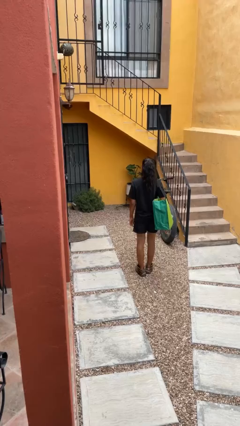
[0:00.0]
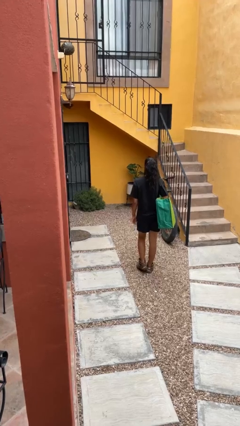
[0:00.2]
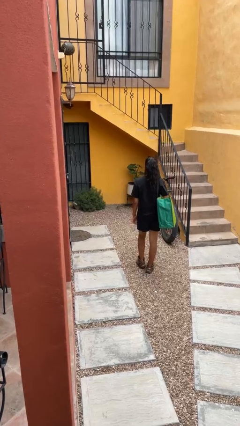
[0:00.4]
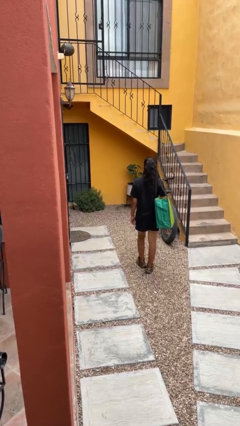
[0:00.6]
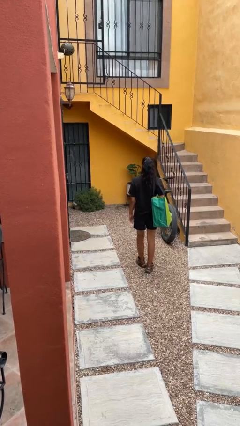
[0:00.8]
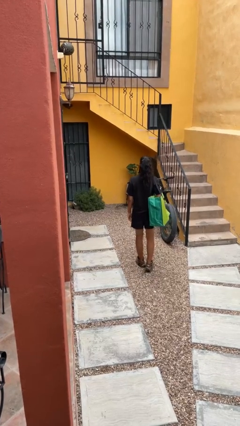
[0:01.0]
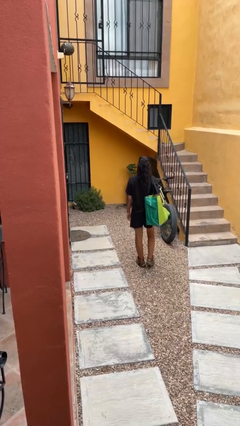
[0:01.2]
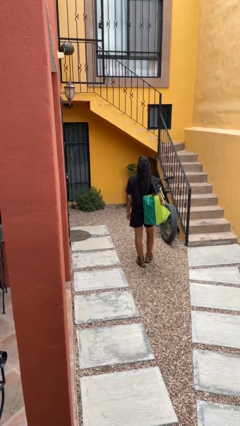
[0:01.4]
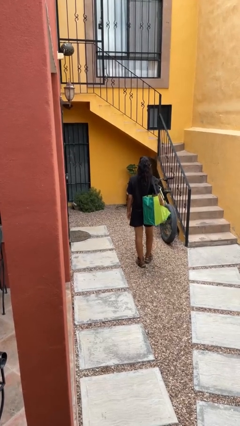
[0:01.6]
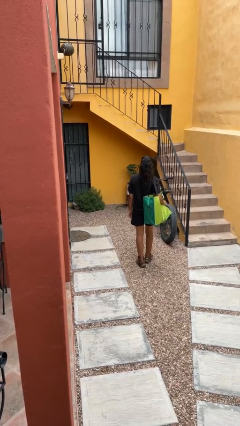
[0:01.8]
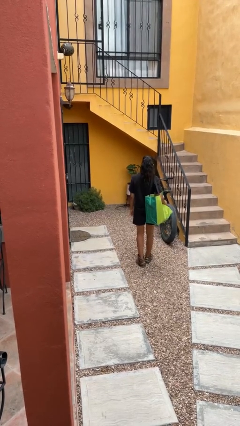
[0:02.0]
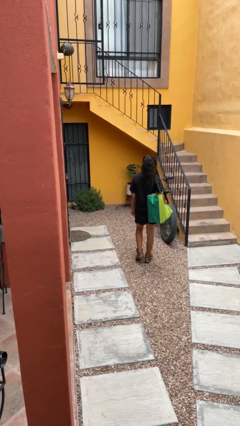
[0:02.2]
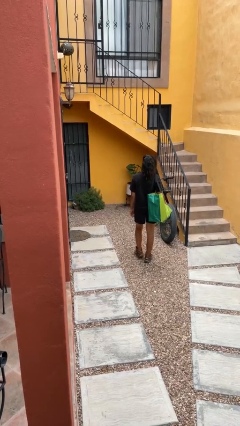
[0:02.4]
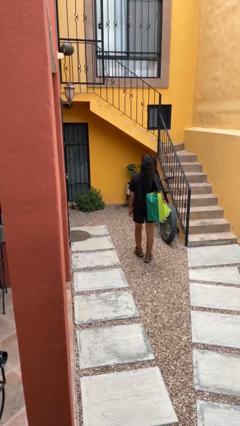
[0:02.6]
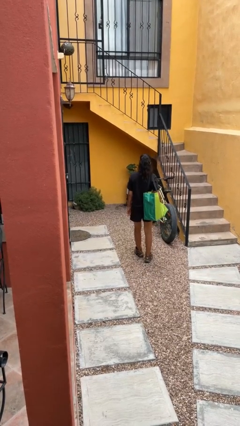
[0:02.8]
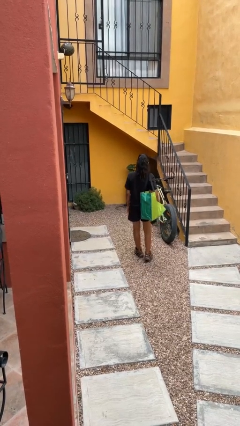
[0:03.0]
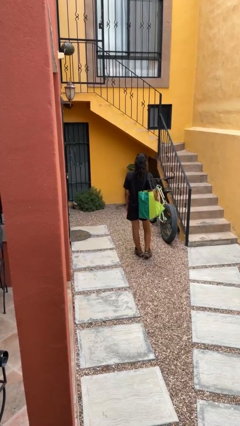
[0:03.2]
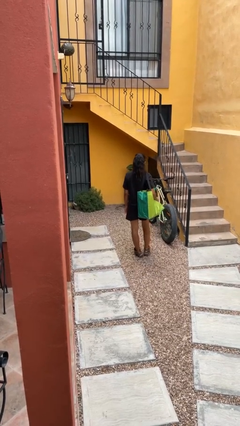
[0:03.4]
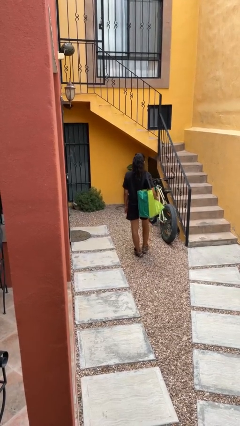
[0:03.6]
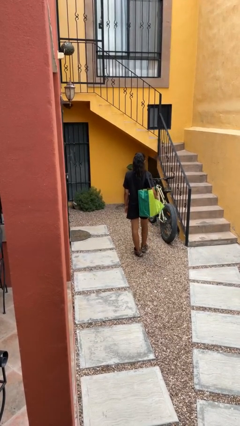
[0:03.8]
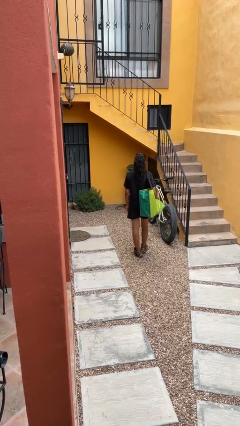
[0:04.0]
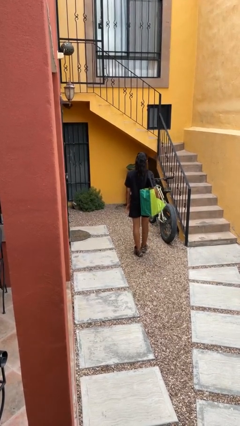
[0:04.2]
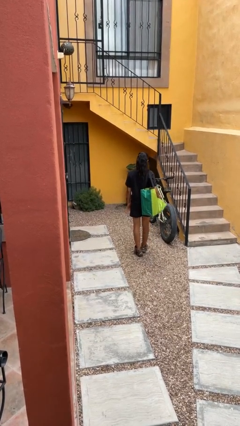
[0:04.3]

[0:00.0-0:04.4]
person carries groceries

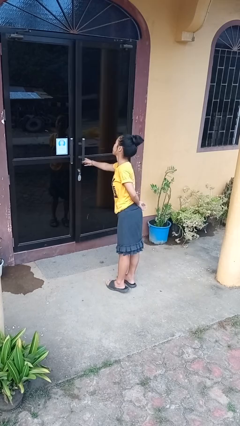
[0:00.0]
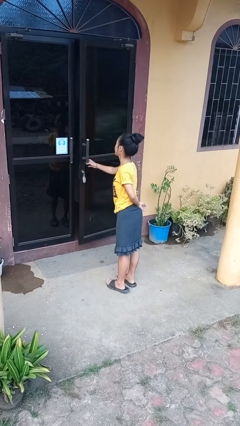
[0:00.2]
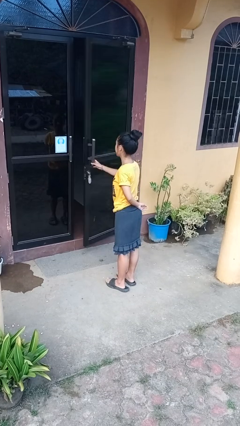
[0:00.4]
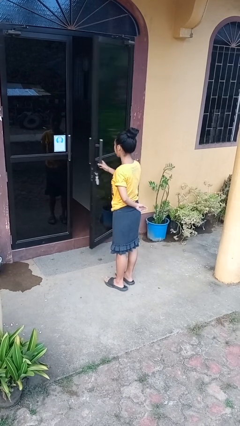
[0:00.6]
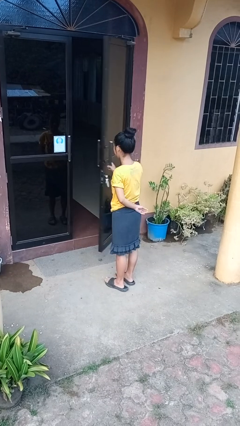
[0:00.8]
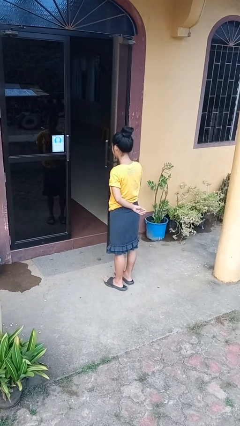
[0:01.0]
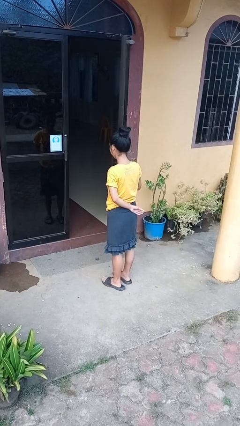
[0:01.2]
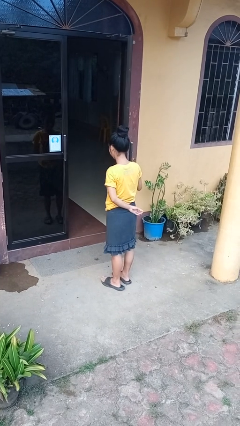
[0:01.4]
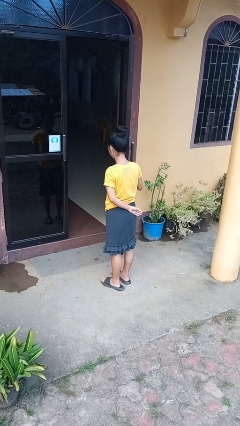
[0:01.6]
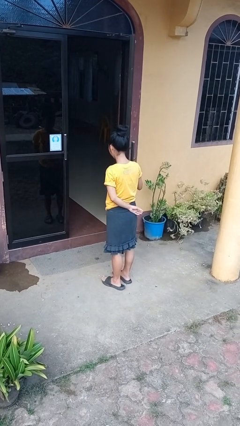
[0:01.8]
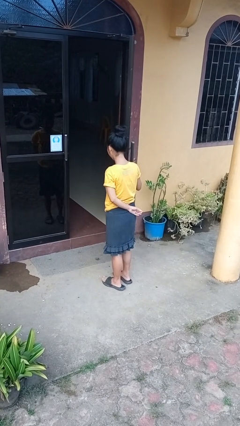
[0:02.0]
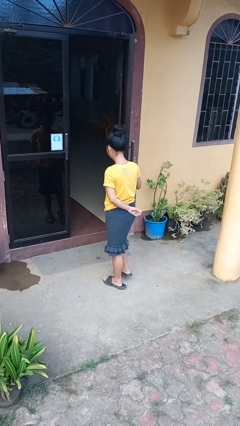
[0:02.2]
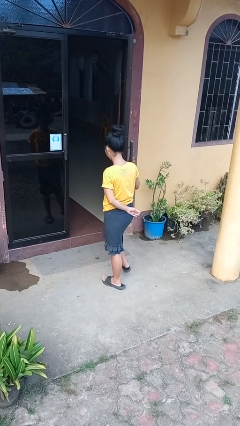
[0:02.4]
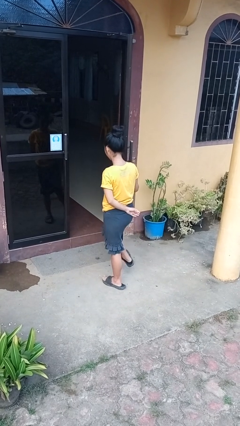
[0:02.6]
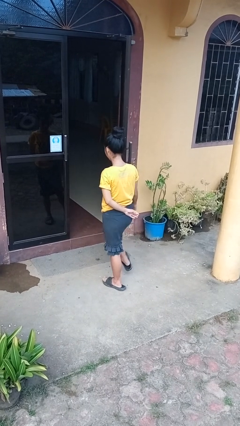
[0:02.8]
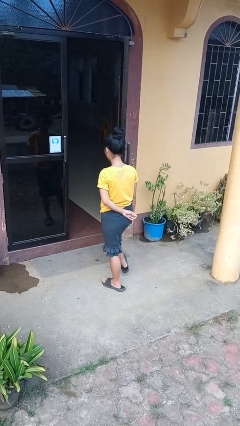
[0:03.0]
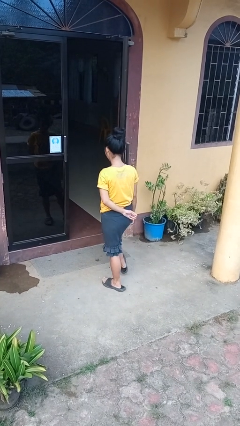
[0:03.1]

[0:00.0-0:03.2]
person opens facility door

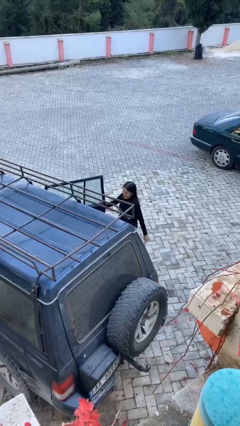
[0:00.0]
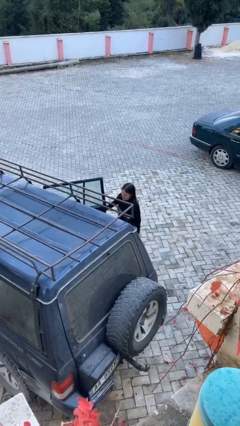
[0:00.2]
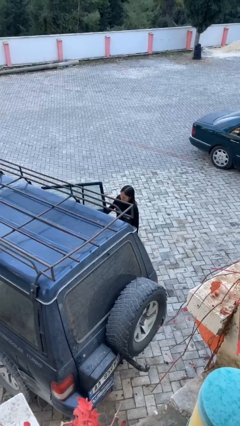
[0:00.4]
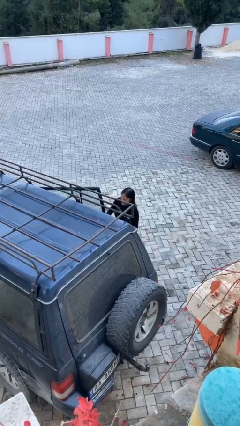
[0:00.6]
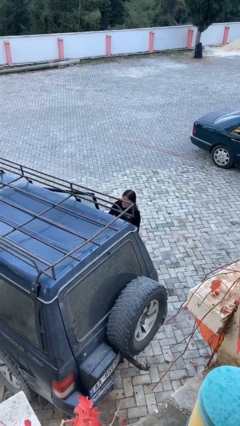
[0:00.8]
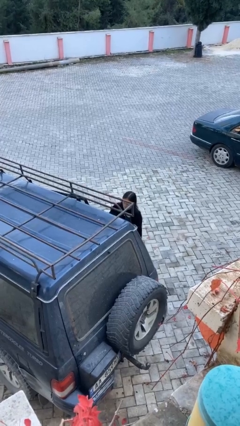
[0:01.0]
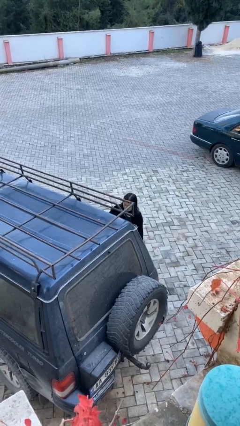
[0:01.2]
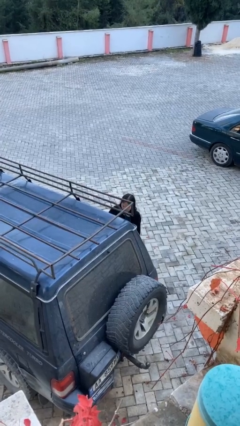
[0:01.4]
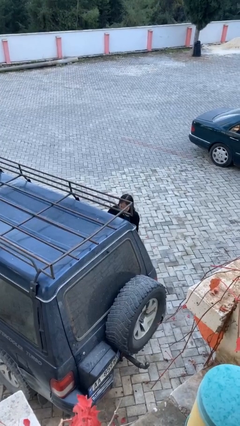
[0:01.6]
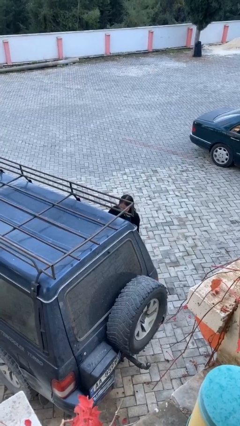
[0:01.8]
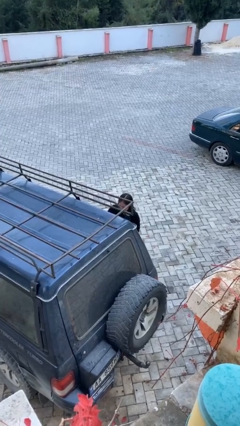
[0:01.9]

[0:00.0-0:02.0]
person closes car door

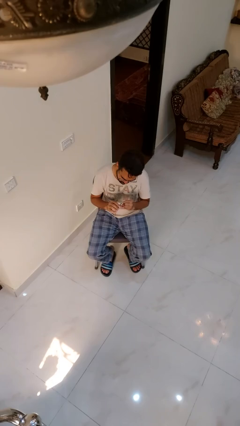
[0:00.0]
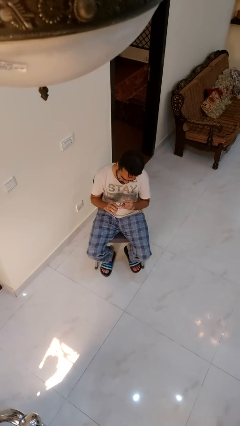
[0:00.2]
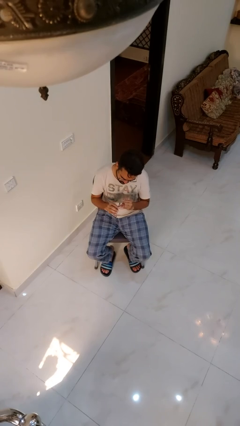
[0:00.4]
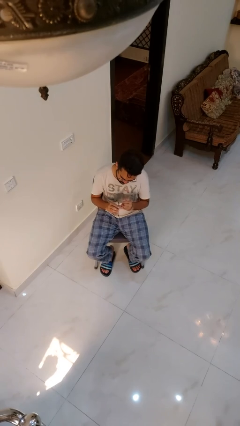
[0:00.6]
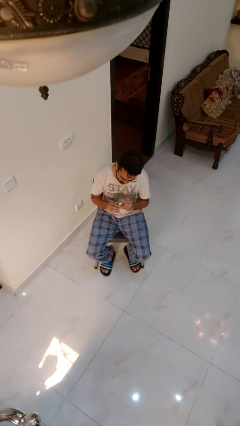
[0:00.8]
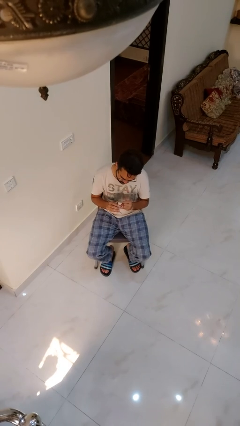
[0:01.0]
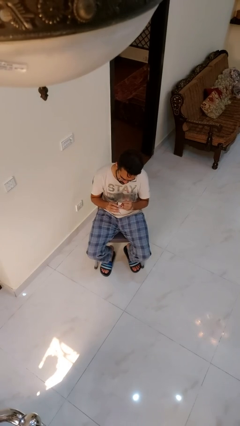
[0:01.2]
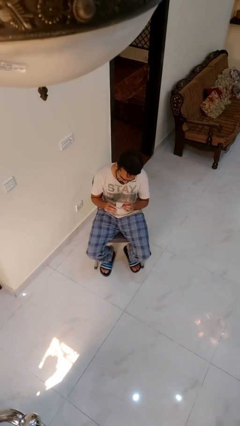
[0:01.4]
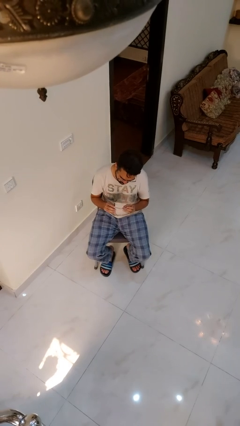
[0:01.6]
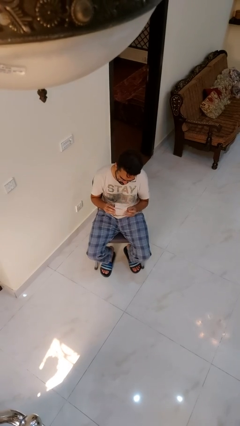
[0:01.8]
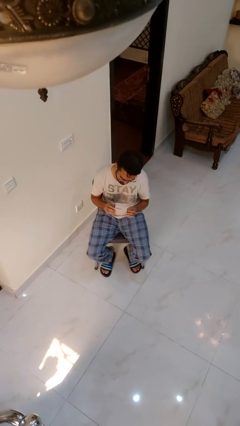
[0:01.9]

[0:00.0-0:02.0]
person files fingernails

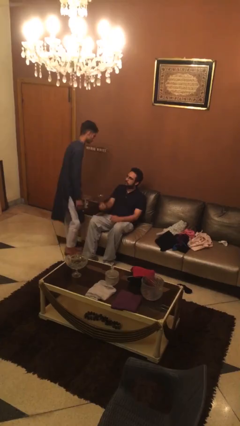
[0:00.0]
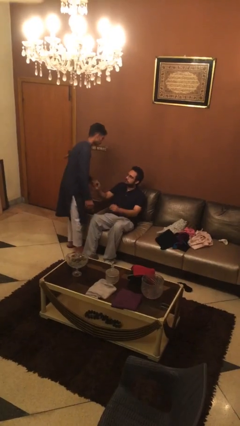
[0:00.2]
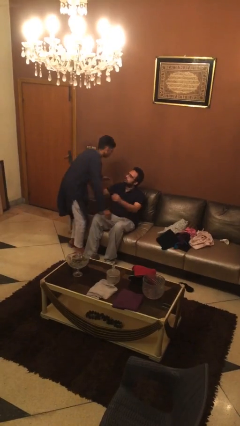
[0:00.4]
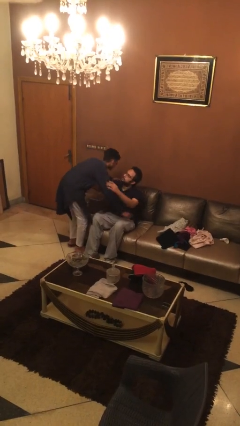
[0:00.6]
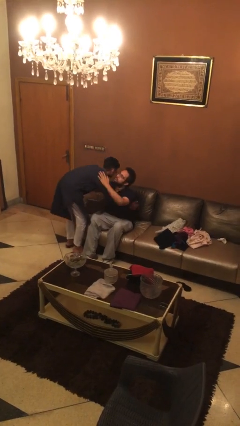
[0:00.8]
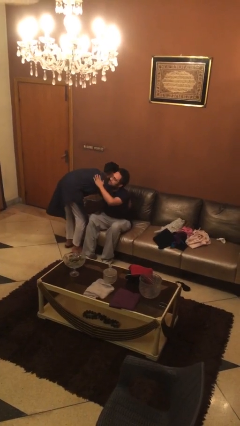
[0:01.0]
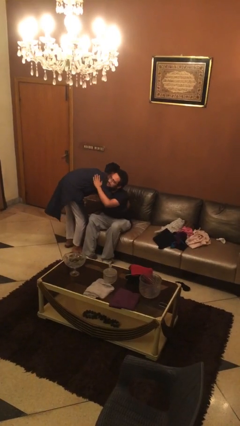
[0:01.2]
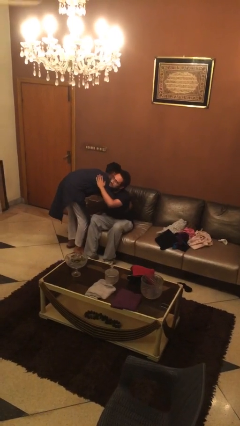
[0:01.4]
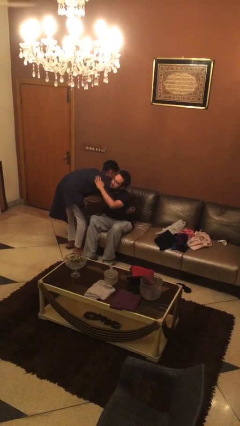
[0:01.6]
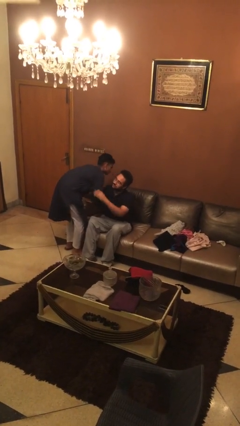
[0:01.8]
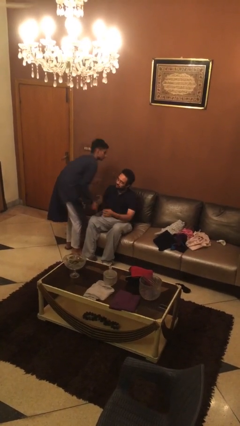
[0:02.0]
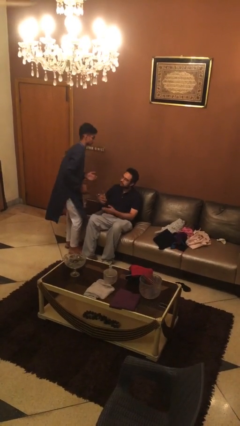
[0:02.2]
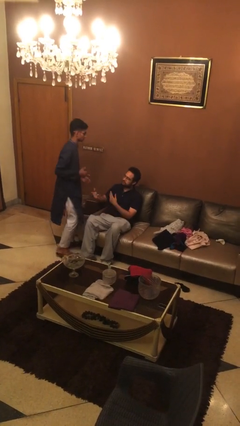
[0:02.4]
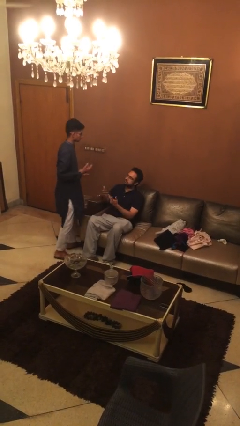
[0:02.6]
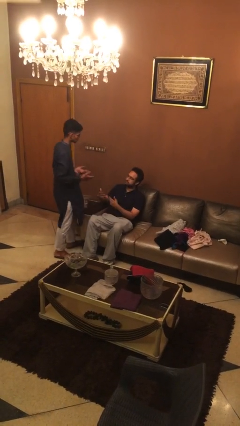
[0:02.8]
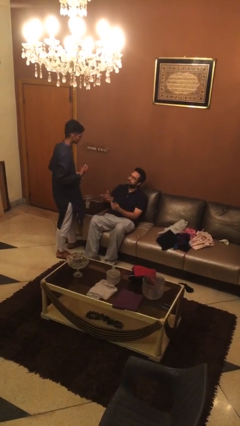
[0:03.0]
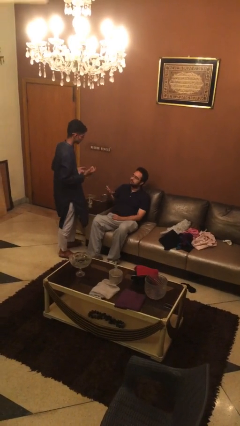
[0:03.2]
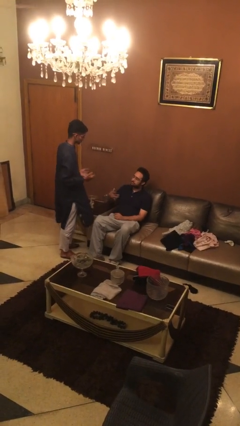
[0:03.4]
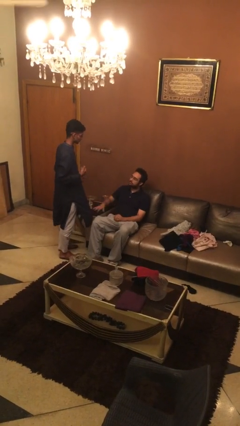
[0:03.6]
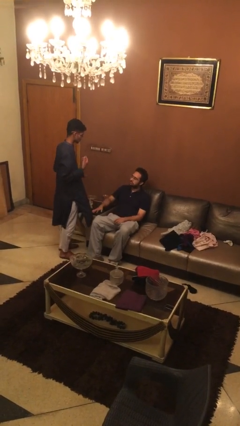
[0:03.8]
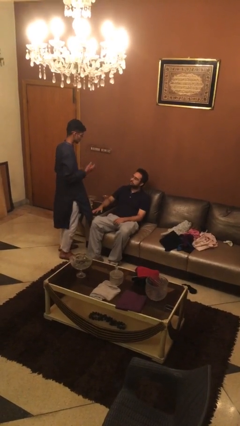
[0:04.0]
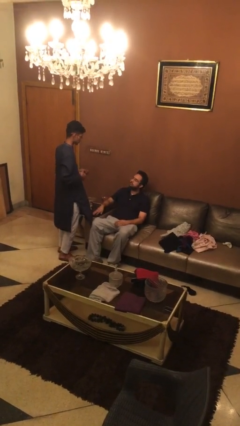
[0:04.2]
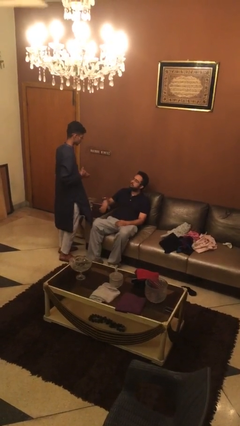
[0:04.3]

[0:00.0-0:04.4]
person embraces person

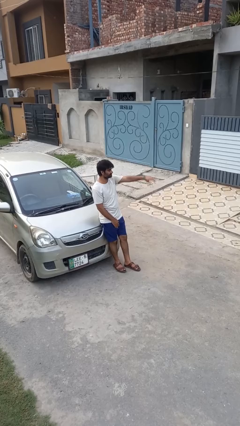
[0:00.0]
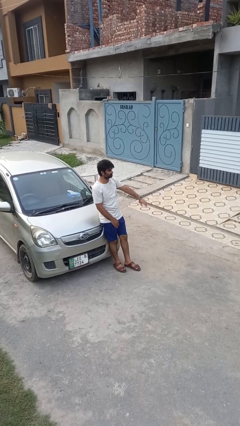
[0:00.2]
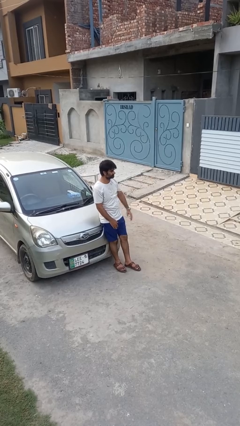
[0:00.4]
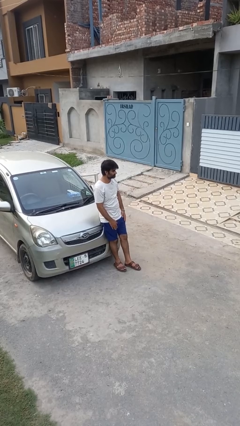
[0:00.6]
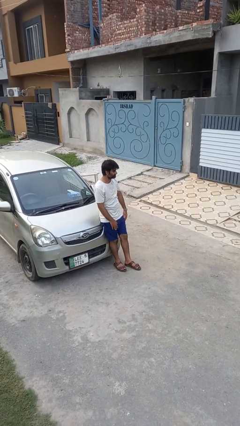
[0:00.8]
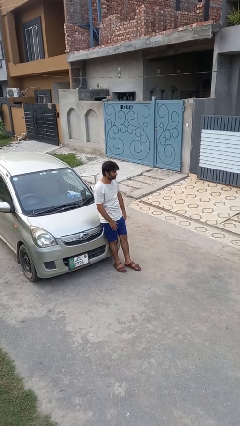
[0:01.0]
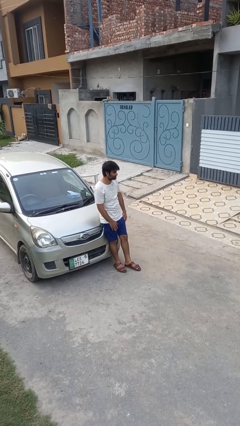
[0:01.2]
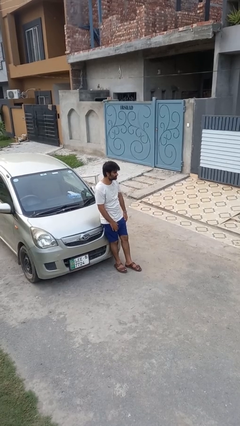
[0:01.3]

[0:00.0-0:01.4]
person gestures lower hand
